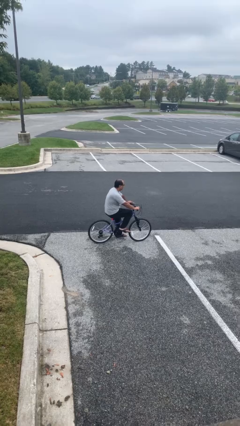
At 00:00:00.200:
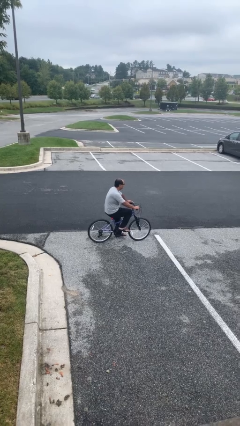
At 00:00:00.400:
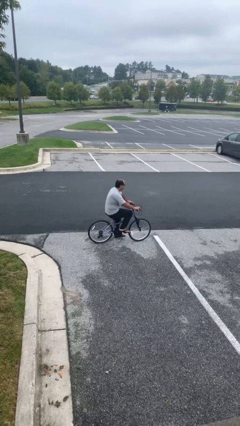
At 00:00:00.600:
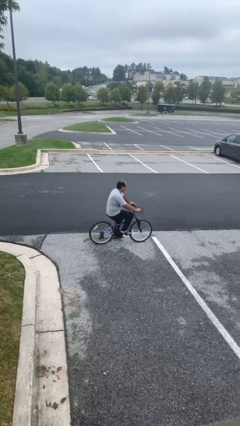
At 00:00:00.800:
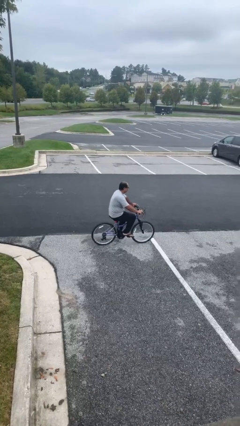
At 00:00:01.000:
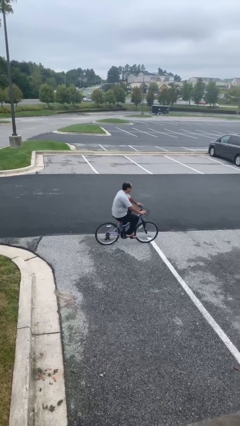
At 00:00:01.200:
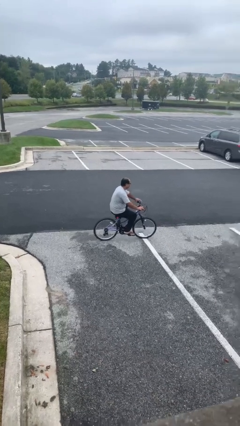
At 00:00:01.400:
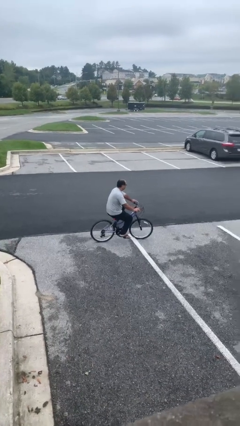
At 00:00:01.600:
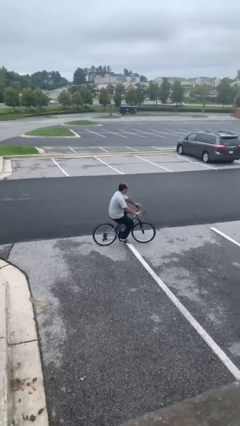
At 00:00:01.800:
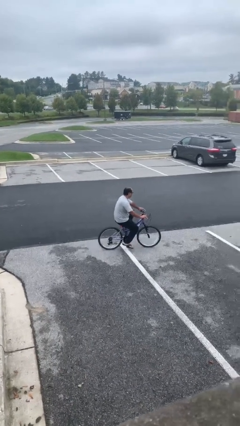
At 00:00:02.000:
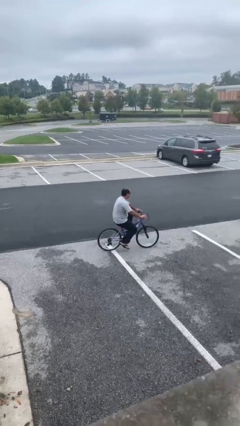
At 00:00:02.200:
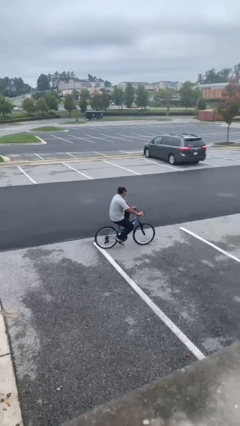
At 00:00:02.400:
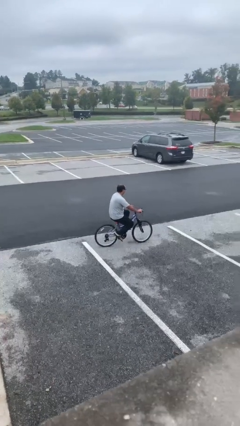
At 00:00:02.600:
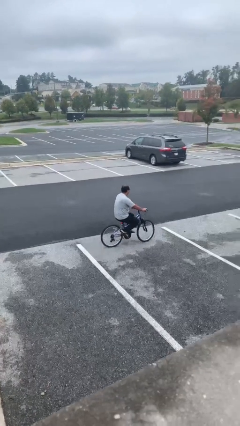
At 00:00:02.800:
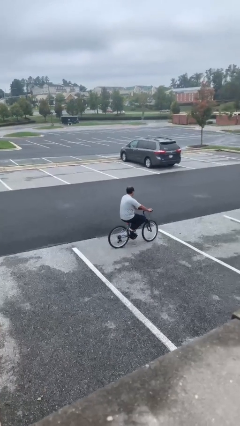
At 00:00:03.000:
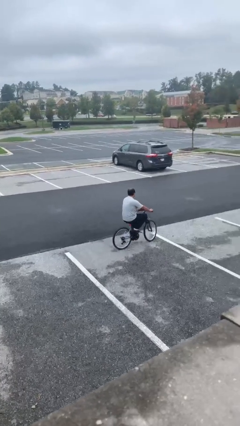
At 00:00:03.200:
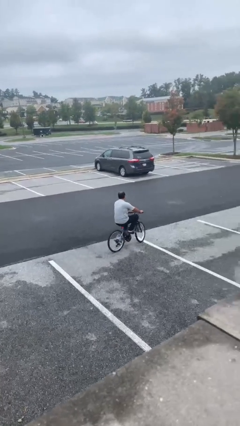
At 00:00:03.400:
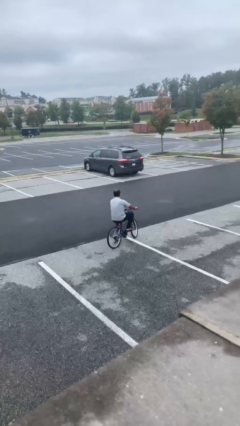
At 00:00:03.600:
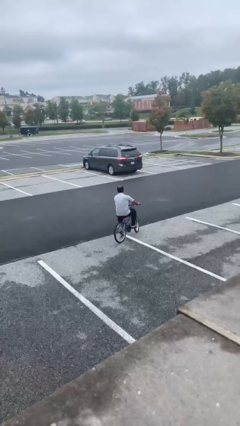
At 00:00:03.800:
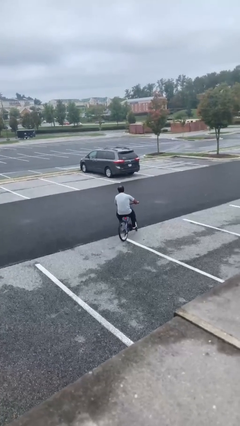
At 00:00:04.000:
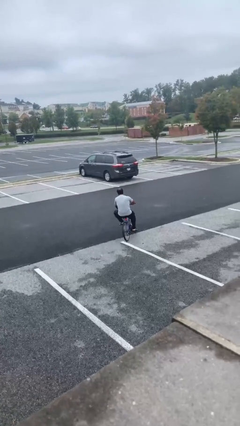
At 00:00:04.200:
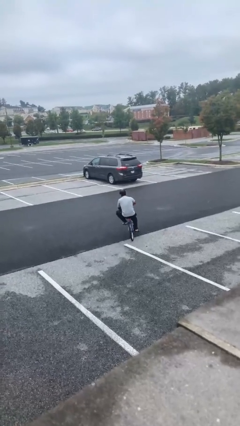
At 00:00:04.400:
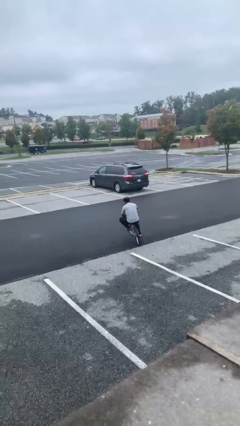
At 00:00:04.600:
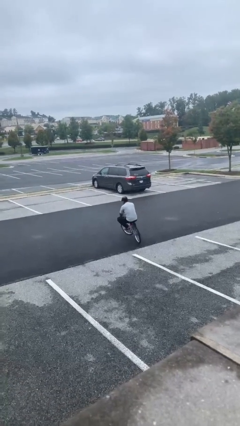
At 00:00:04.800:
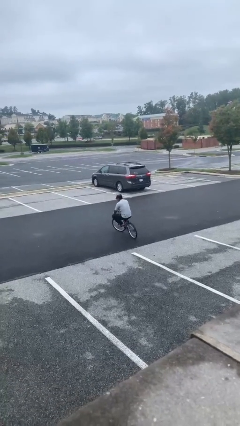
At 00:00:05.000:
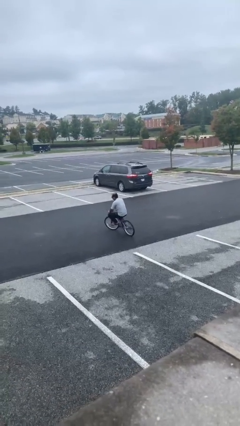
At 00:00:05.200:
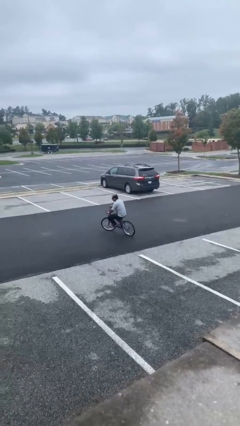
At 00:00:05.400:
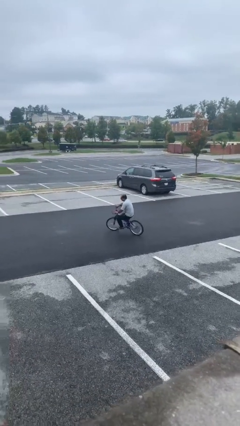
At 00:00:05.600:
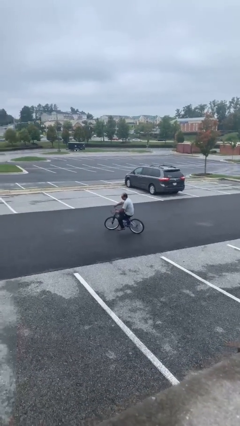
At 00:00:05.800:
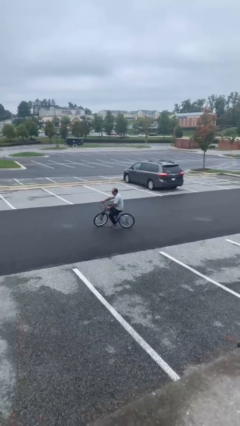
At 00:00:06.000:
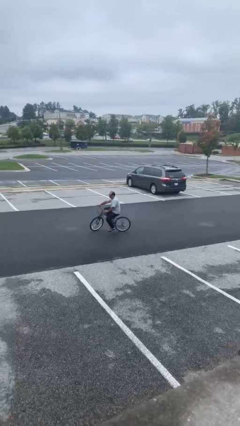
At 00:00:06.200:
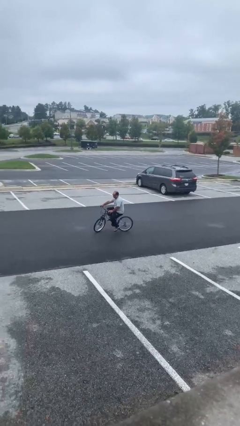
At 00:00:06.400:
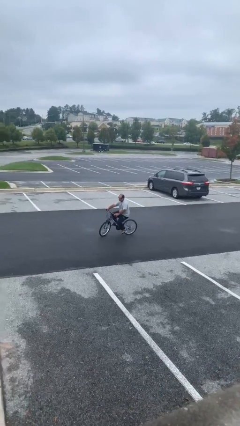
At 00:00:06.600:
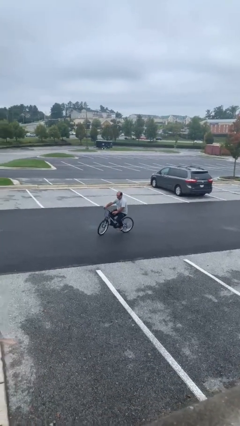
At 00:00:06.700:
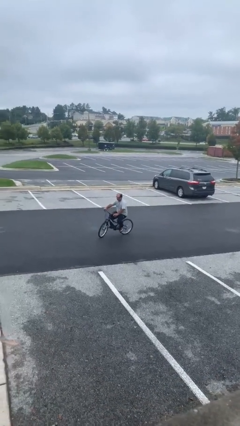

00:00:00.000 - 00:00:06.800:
person rides bicycle

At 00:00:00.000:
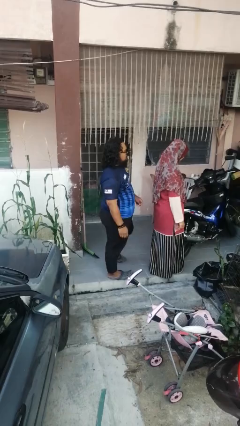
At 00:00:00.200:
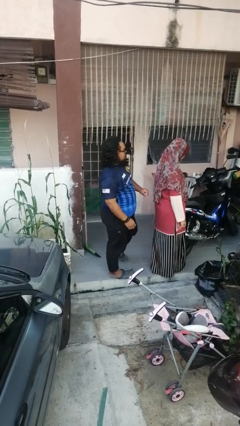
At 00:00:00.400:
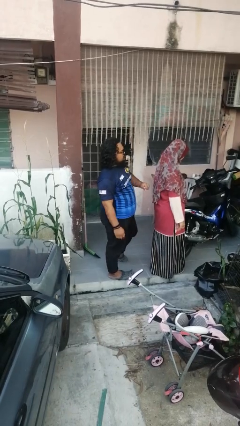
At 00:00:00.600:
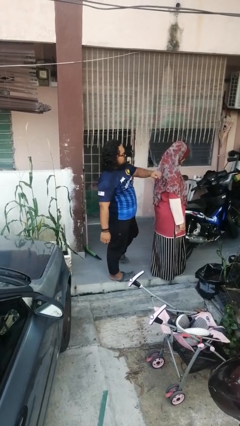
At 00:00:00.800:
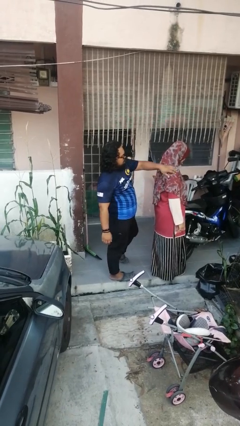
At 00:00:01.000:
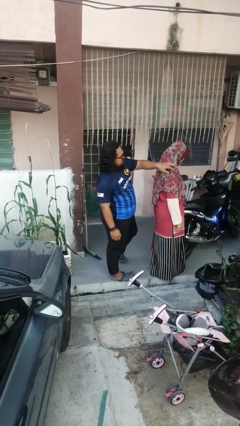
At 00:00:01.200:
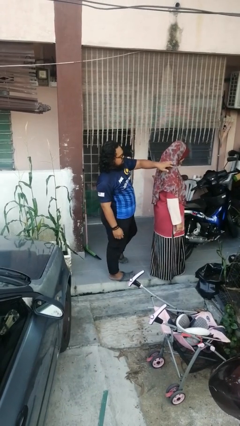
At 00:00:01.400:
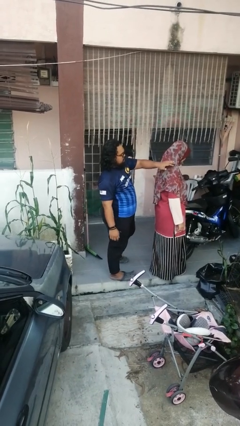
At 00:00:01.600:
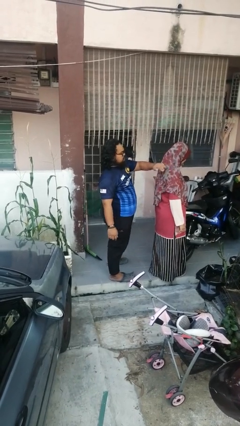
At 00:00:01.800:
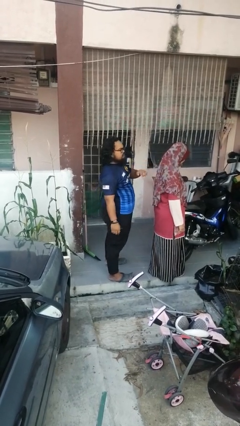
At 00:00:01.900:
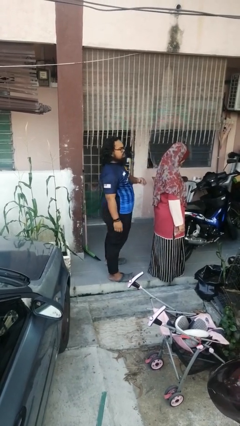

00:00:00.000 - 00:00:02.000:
person touches back of person

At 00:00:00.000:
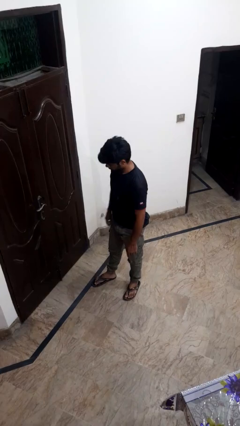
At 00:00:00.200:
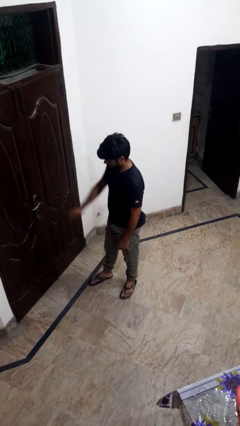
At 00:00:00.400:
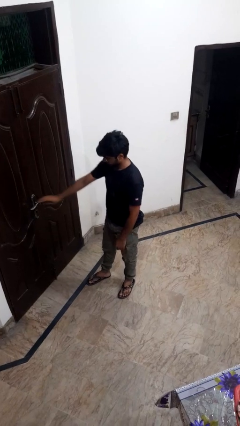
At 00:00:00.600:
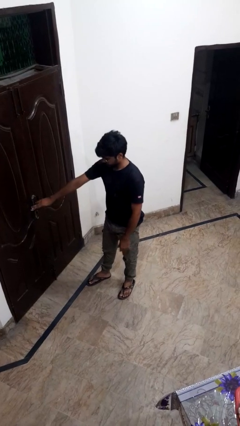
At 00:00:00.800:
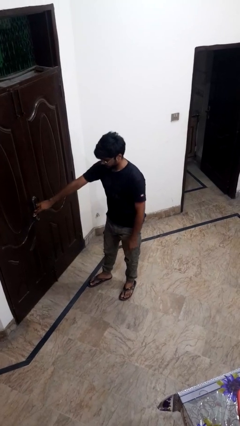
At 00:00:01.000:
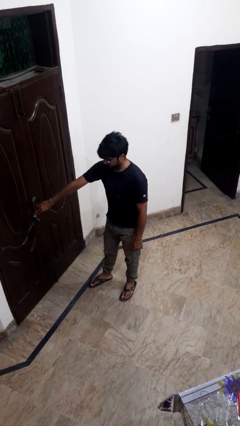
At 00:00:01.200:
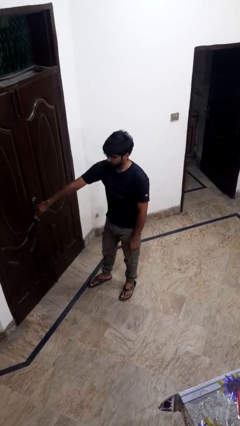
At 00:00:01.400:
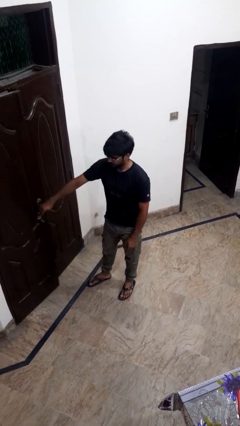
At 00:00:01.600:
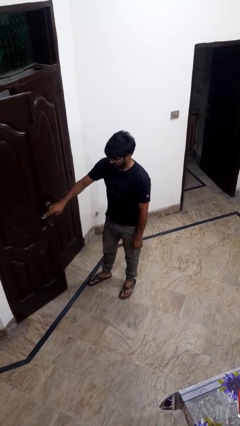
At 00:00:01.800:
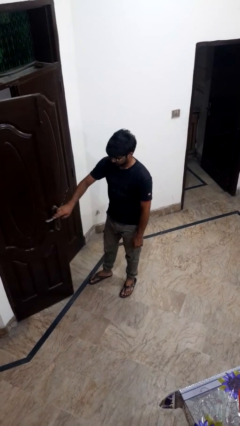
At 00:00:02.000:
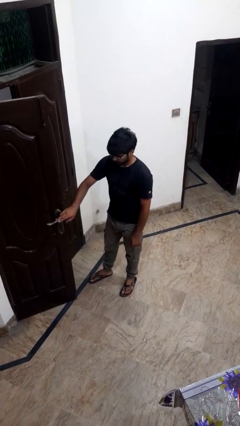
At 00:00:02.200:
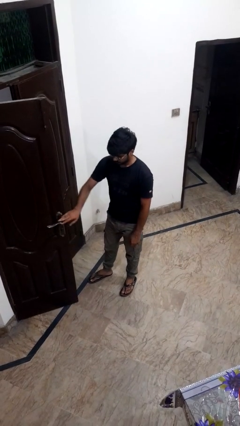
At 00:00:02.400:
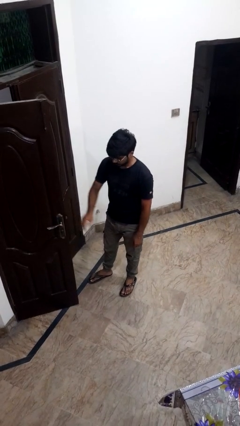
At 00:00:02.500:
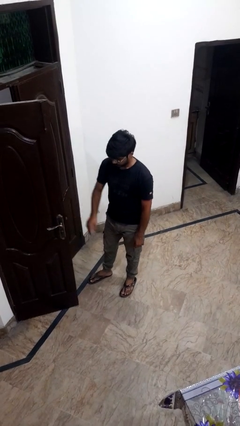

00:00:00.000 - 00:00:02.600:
person opens facility door

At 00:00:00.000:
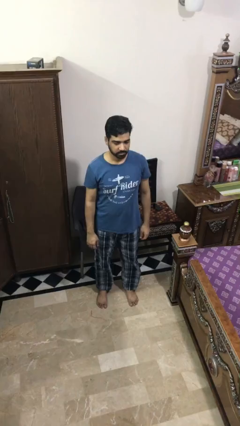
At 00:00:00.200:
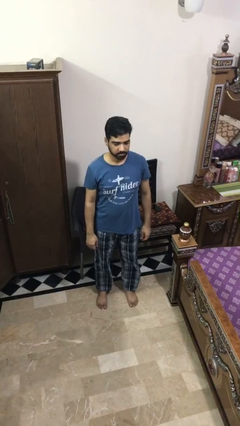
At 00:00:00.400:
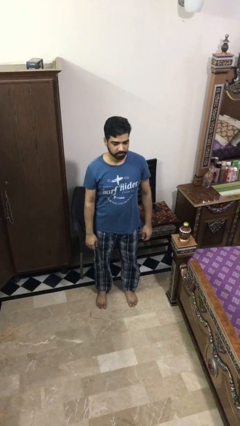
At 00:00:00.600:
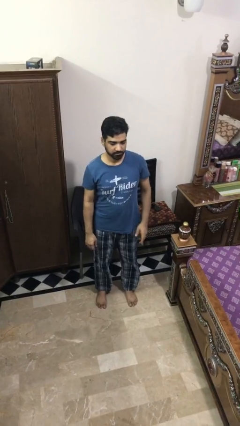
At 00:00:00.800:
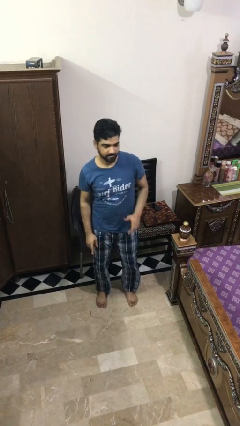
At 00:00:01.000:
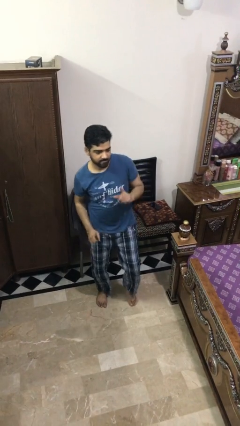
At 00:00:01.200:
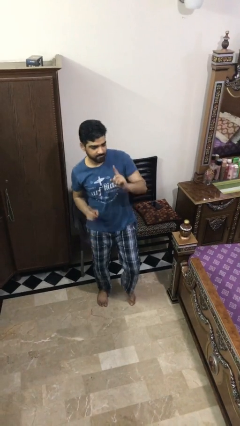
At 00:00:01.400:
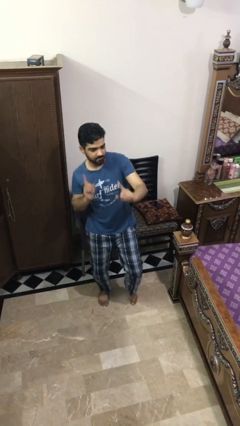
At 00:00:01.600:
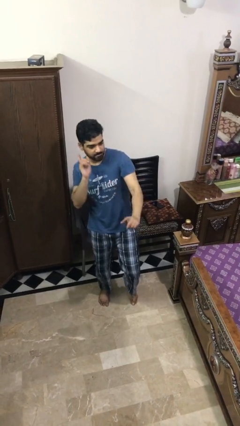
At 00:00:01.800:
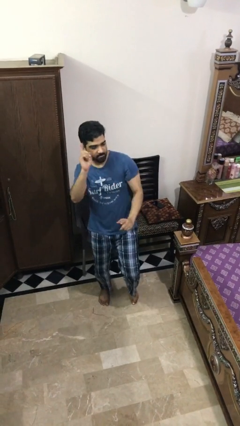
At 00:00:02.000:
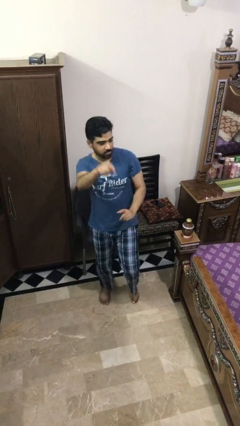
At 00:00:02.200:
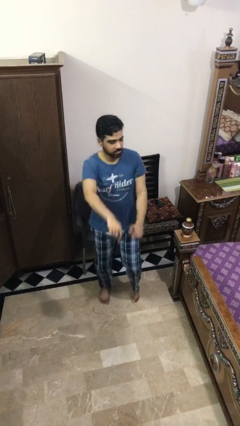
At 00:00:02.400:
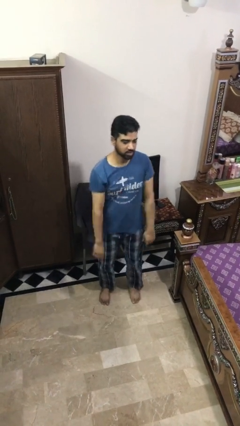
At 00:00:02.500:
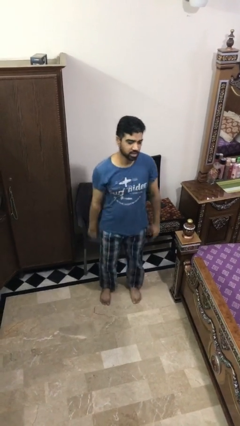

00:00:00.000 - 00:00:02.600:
person dances in place

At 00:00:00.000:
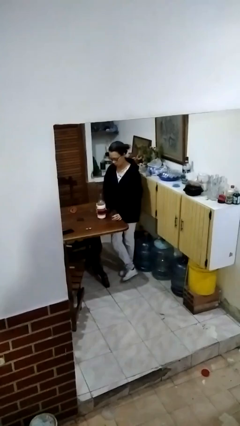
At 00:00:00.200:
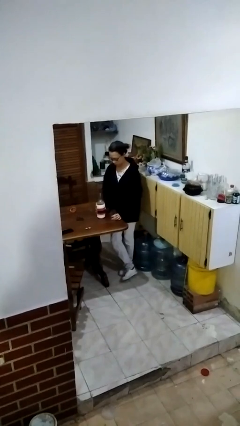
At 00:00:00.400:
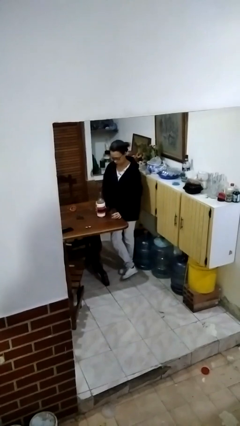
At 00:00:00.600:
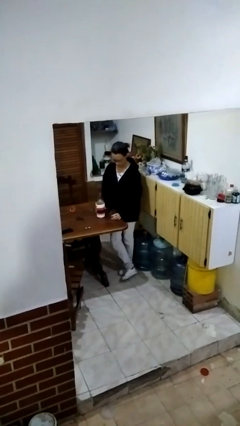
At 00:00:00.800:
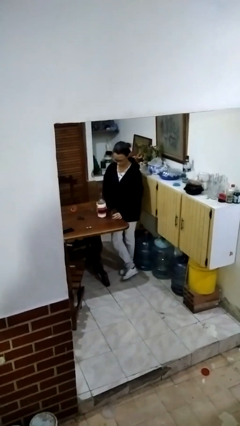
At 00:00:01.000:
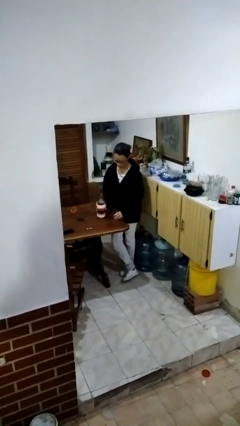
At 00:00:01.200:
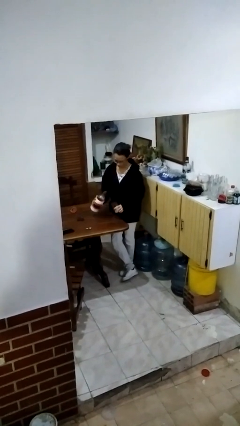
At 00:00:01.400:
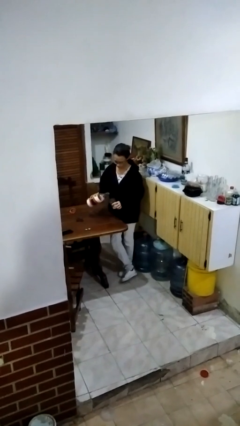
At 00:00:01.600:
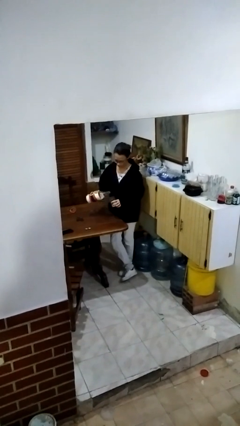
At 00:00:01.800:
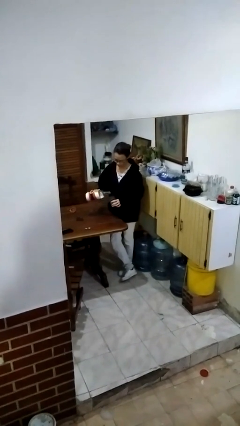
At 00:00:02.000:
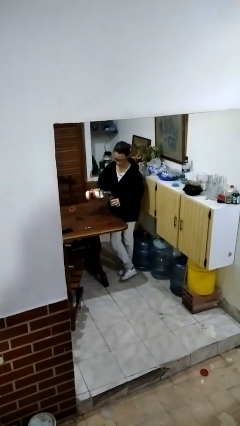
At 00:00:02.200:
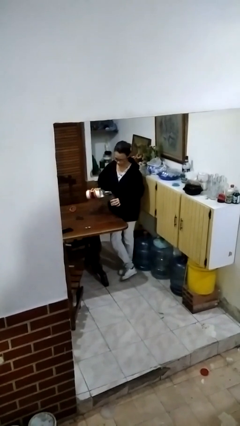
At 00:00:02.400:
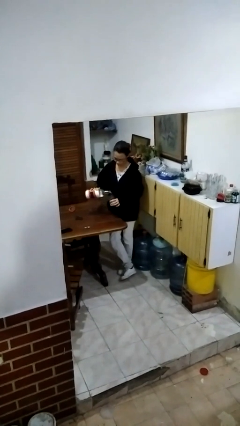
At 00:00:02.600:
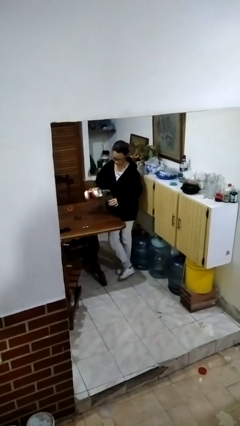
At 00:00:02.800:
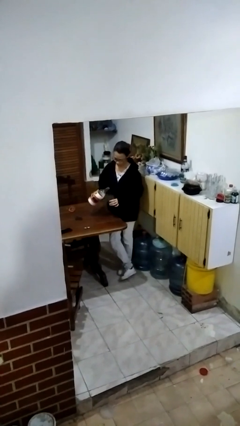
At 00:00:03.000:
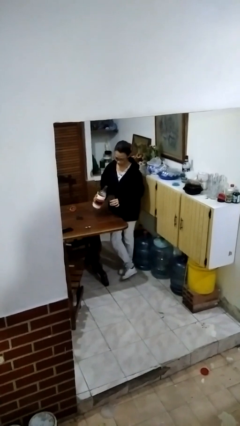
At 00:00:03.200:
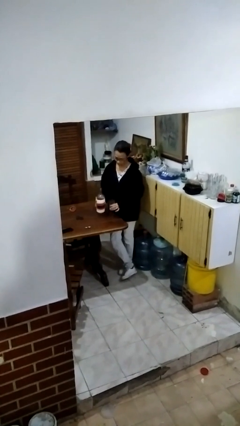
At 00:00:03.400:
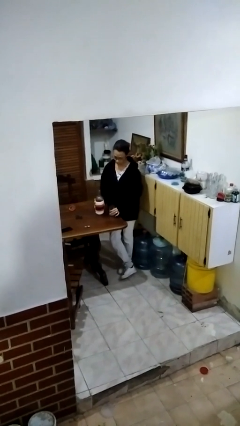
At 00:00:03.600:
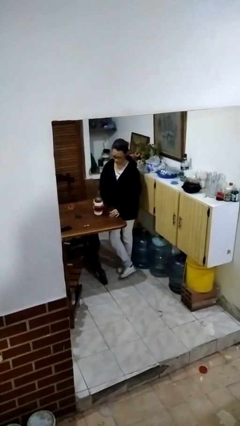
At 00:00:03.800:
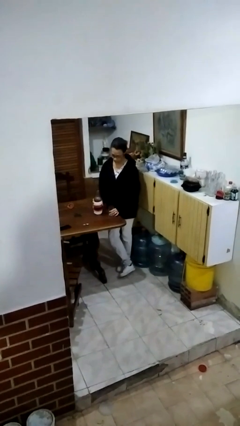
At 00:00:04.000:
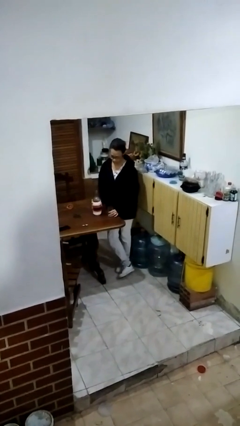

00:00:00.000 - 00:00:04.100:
person pours liquid into cup
